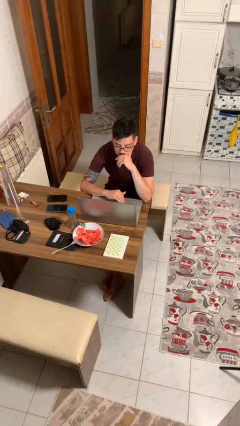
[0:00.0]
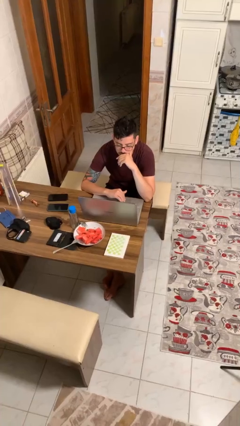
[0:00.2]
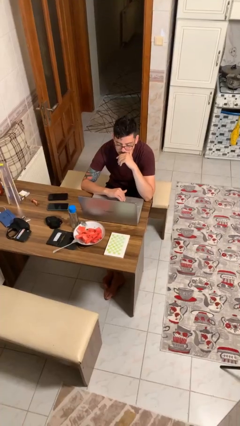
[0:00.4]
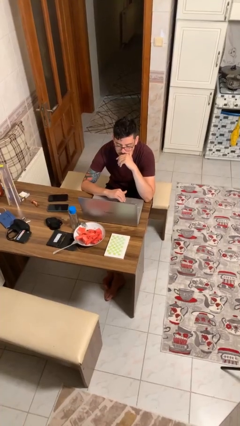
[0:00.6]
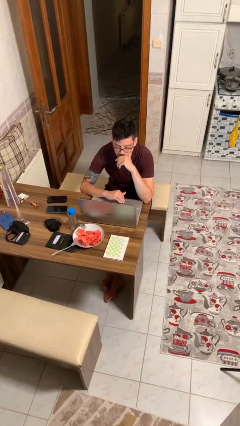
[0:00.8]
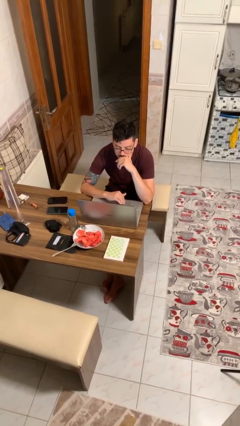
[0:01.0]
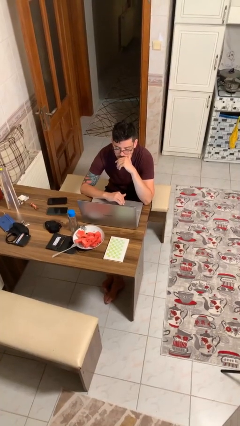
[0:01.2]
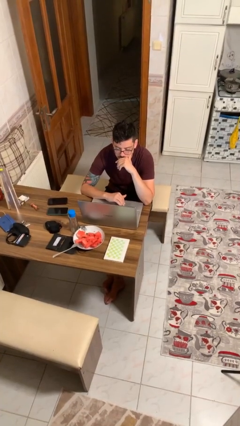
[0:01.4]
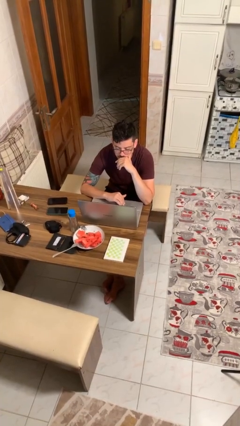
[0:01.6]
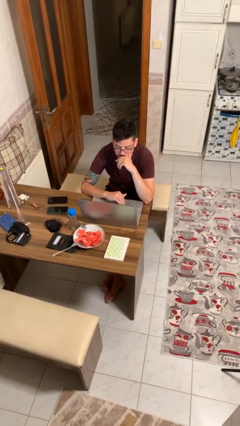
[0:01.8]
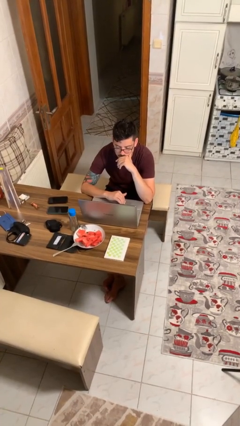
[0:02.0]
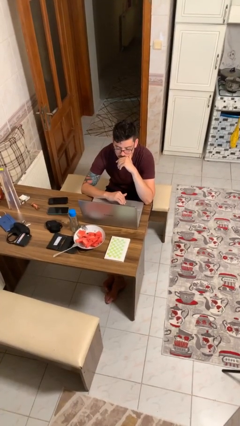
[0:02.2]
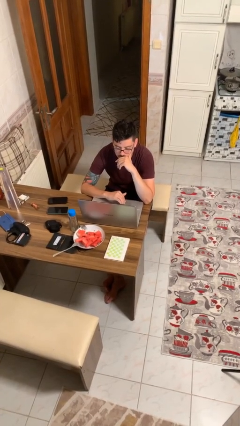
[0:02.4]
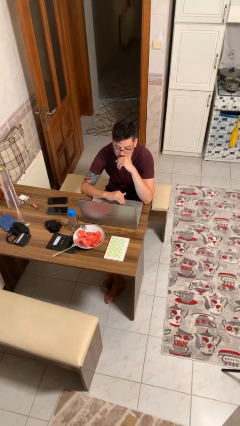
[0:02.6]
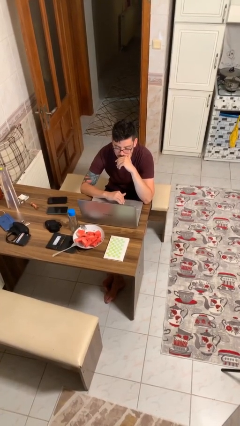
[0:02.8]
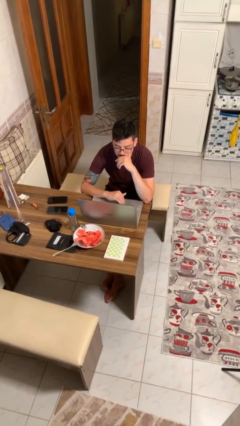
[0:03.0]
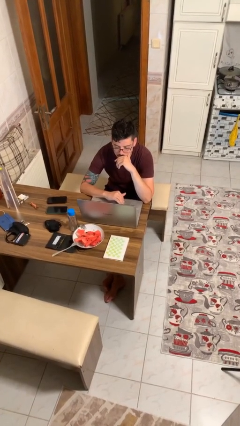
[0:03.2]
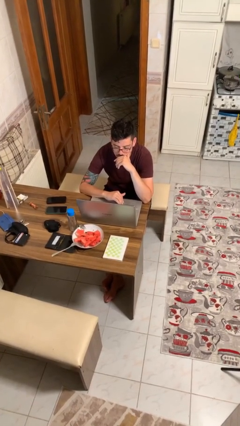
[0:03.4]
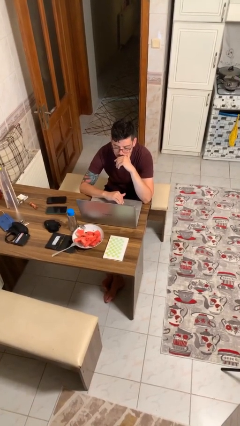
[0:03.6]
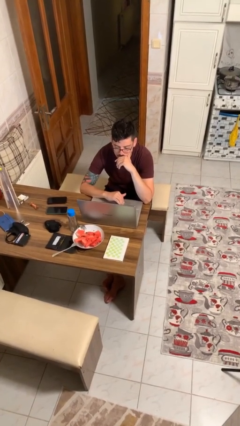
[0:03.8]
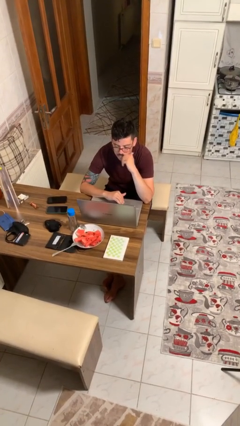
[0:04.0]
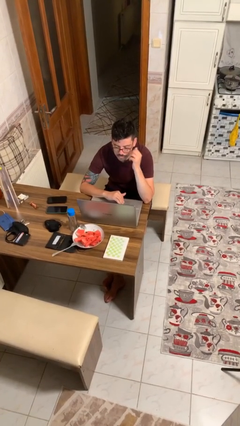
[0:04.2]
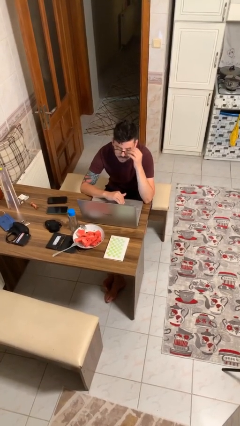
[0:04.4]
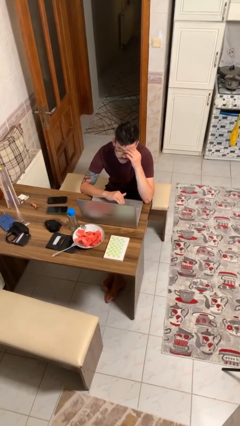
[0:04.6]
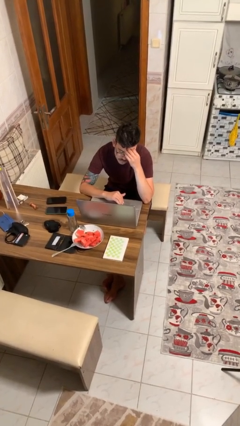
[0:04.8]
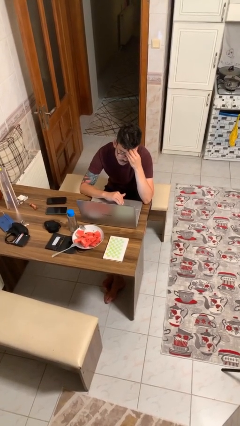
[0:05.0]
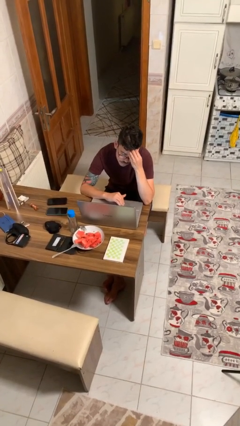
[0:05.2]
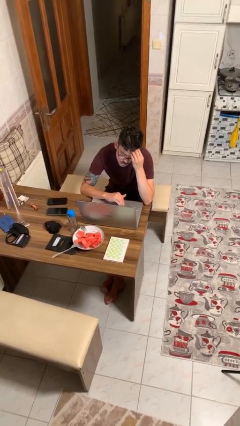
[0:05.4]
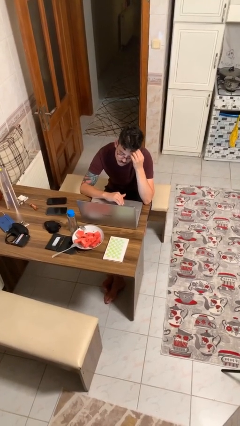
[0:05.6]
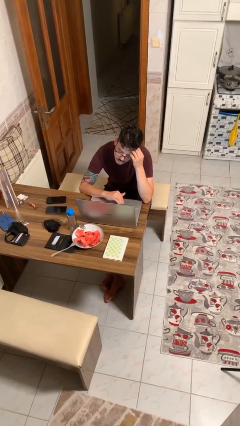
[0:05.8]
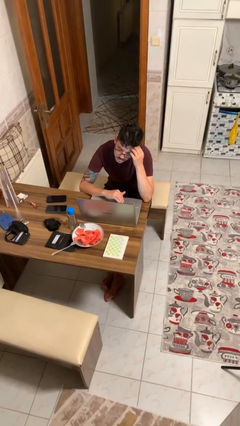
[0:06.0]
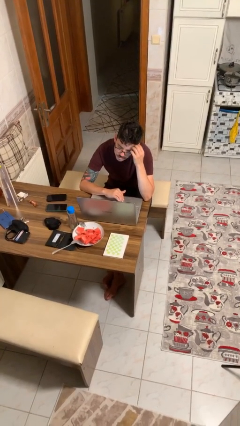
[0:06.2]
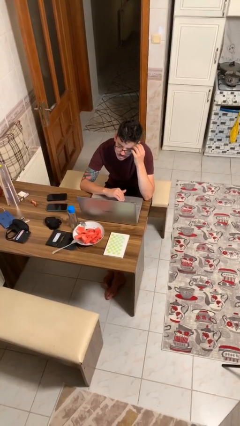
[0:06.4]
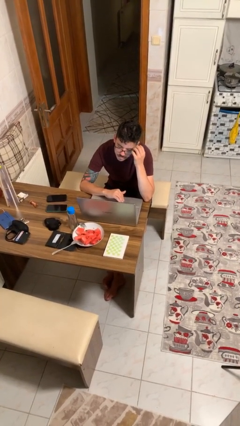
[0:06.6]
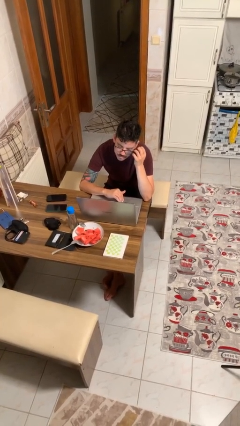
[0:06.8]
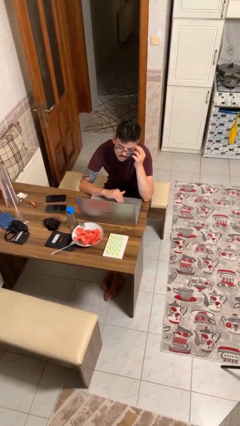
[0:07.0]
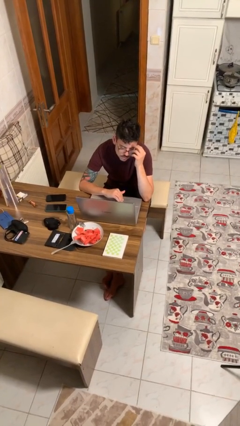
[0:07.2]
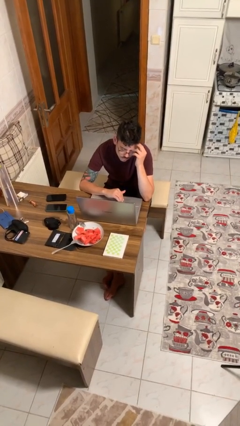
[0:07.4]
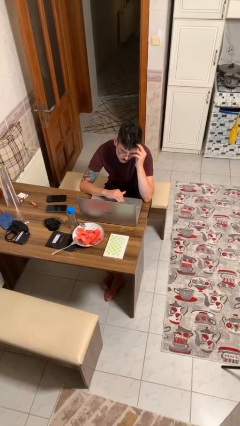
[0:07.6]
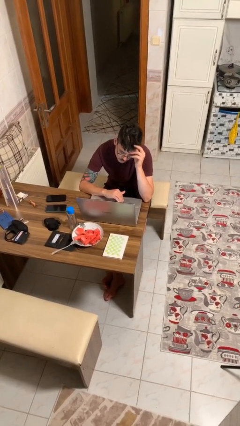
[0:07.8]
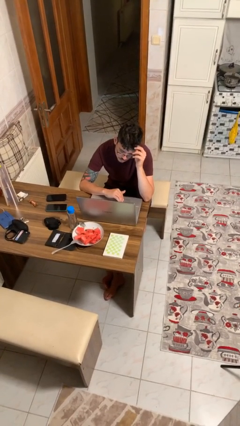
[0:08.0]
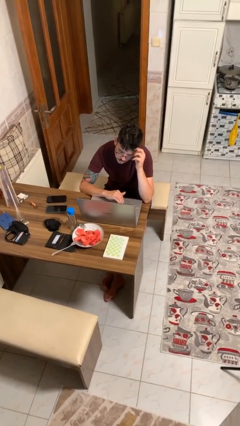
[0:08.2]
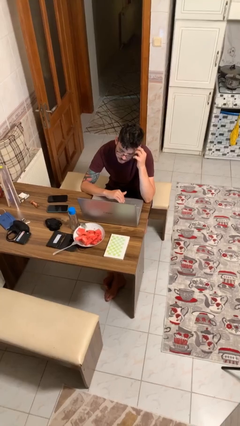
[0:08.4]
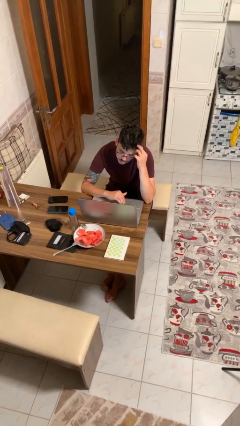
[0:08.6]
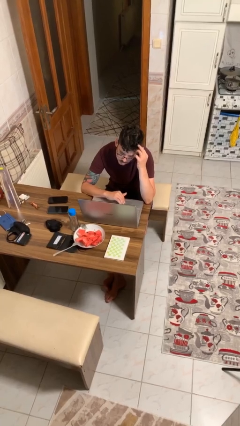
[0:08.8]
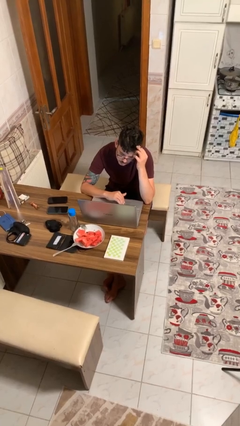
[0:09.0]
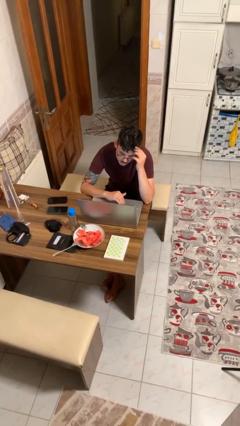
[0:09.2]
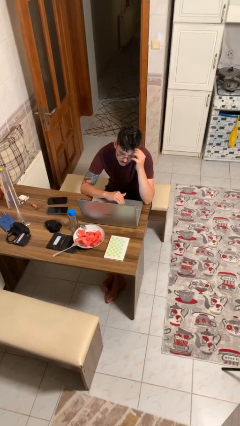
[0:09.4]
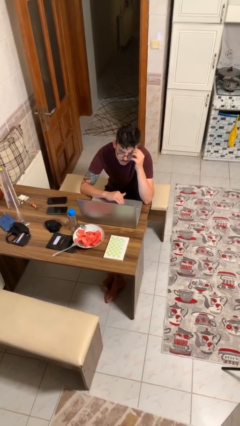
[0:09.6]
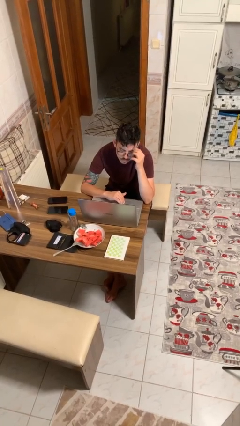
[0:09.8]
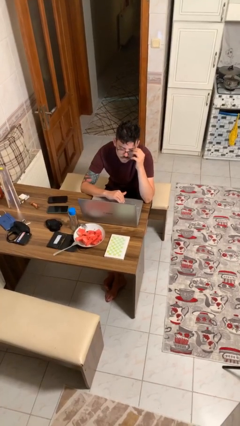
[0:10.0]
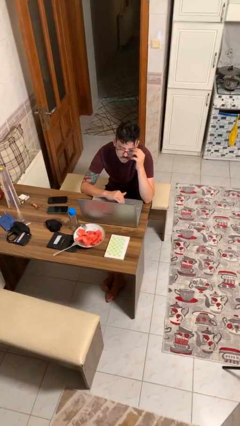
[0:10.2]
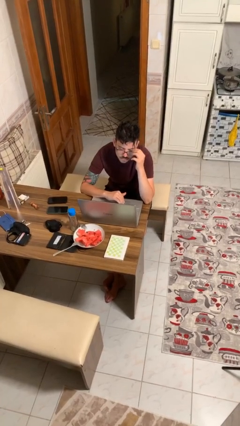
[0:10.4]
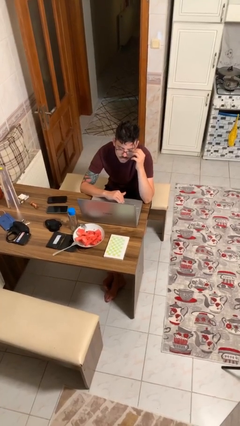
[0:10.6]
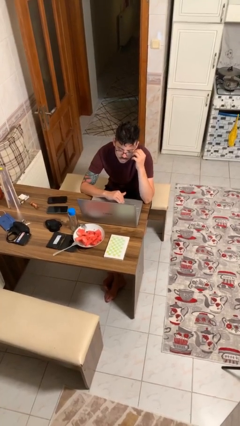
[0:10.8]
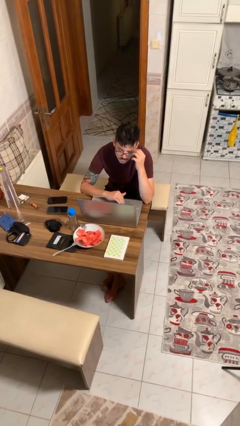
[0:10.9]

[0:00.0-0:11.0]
person interacts with laptop

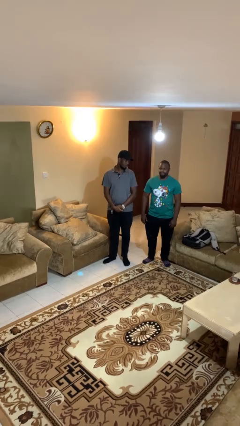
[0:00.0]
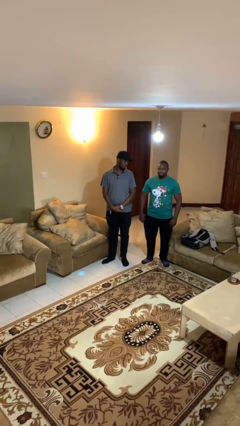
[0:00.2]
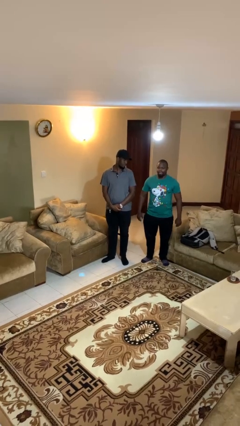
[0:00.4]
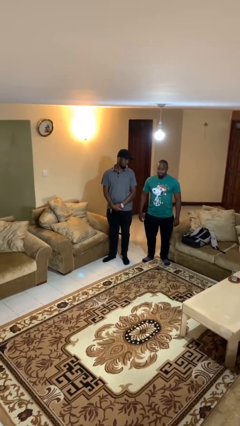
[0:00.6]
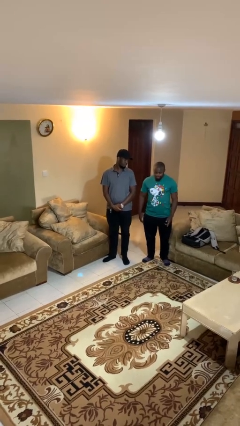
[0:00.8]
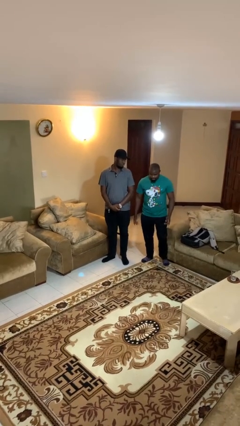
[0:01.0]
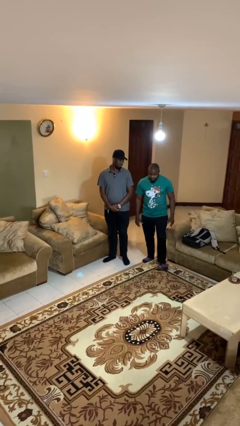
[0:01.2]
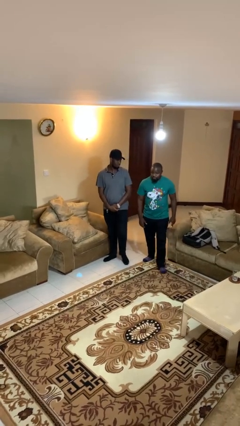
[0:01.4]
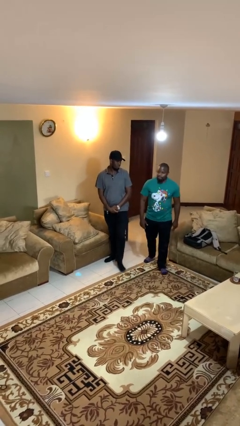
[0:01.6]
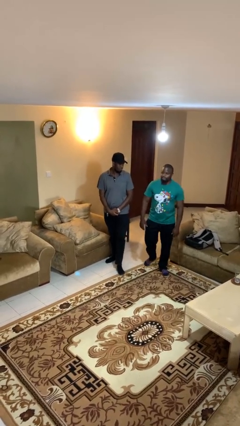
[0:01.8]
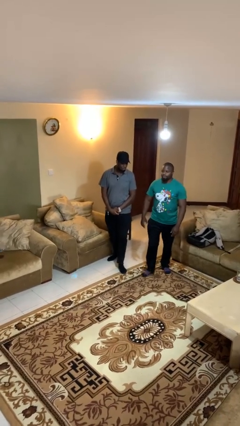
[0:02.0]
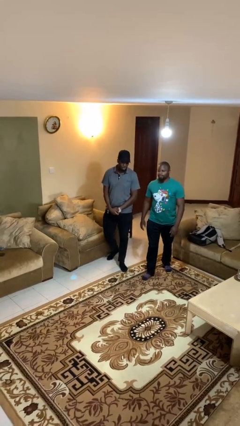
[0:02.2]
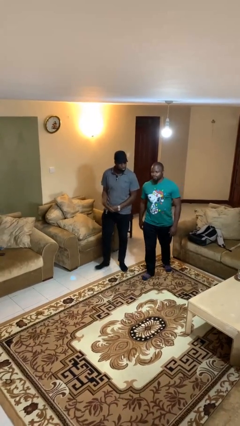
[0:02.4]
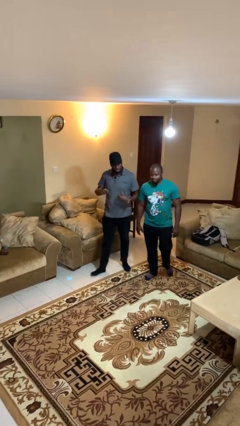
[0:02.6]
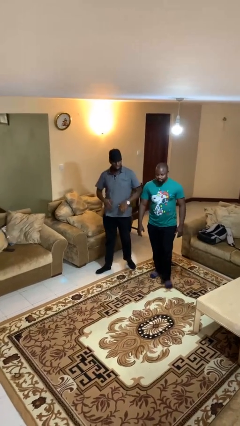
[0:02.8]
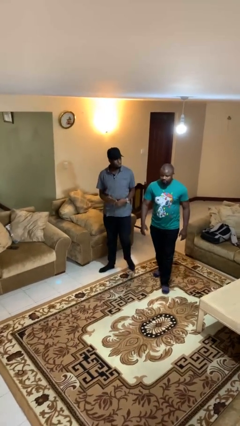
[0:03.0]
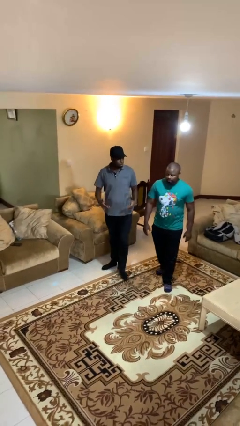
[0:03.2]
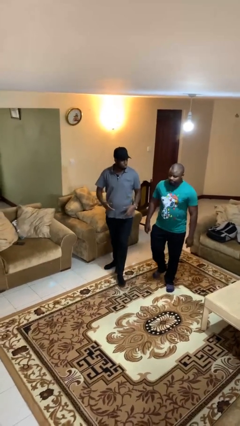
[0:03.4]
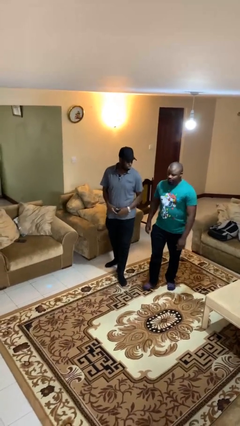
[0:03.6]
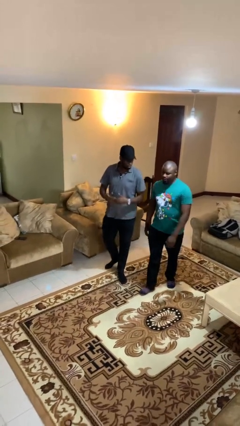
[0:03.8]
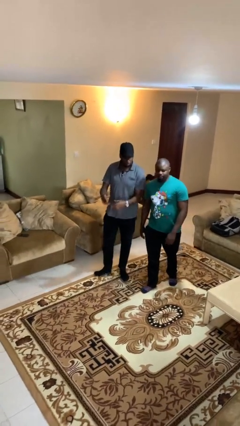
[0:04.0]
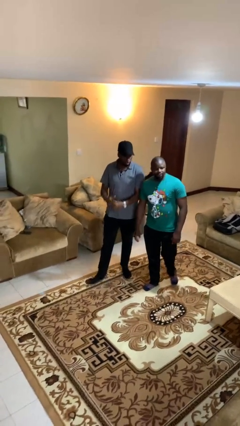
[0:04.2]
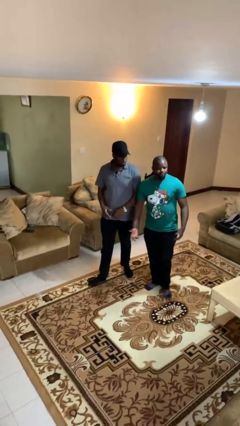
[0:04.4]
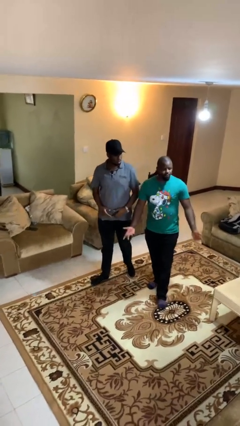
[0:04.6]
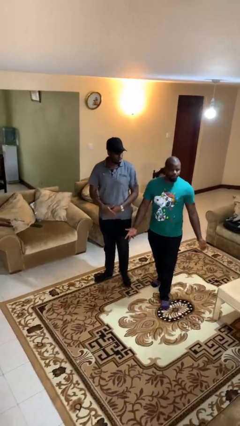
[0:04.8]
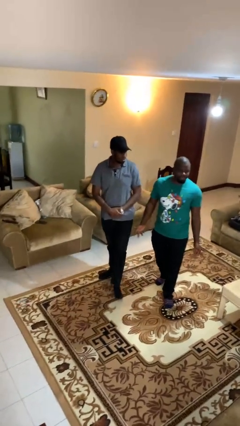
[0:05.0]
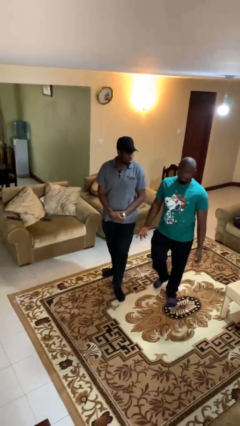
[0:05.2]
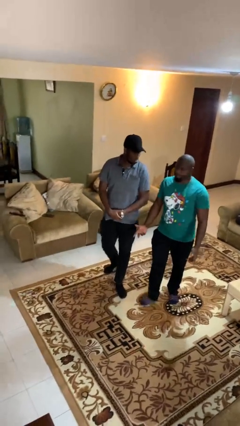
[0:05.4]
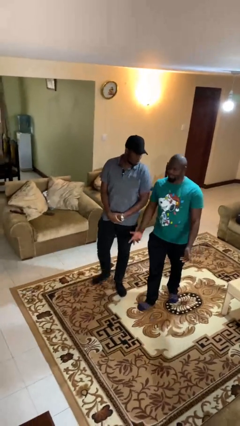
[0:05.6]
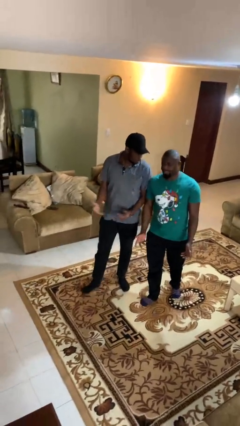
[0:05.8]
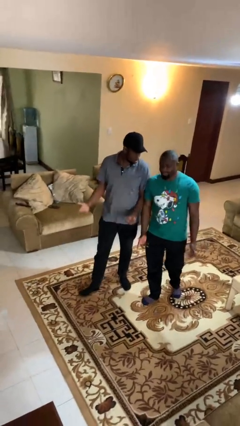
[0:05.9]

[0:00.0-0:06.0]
person talks to person

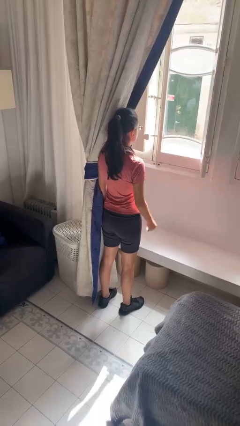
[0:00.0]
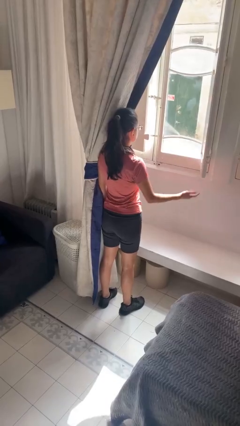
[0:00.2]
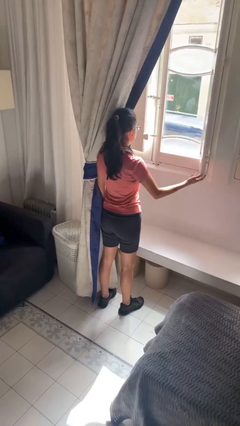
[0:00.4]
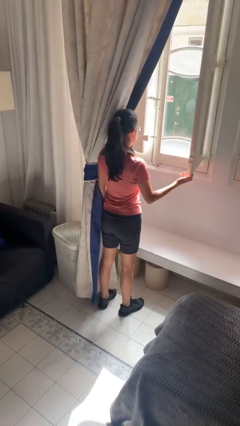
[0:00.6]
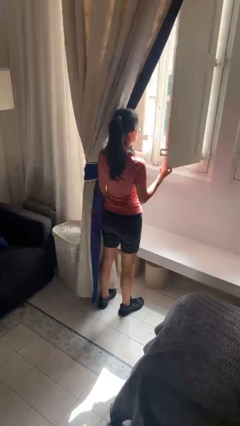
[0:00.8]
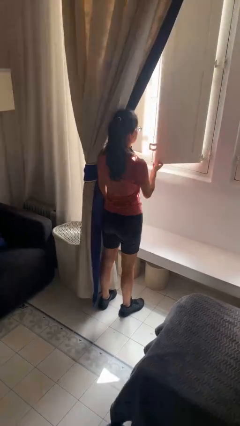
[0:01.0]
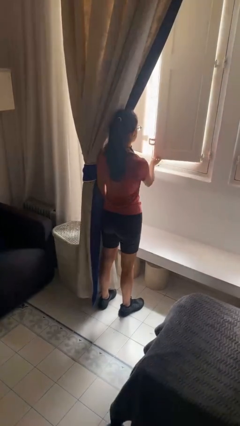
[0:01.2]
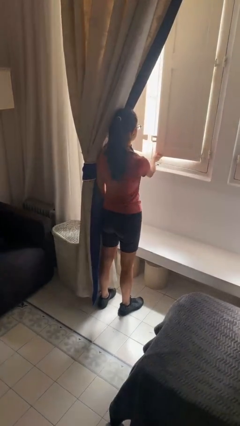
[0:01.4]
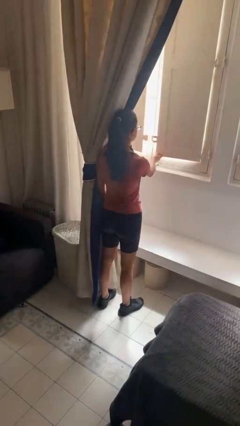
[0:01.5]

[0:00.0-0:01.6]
person closes home window
